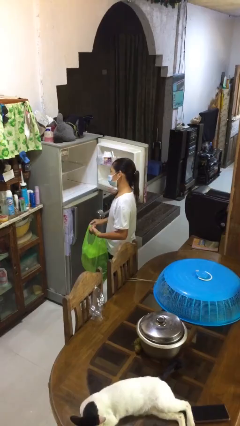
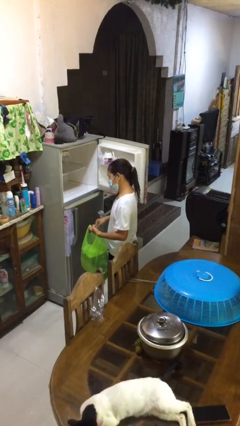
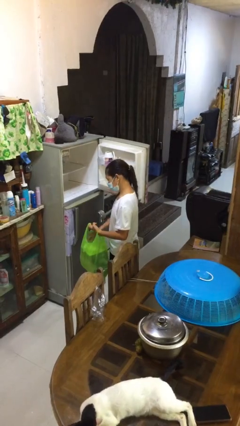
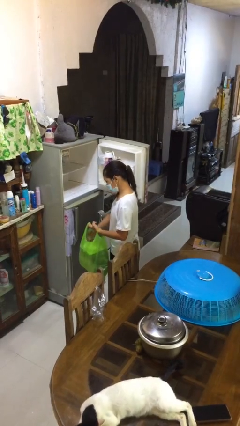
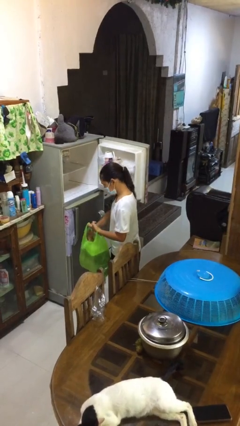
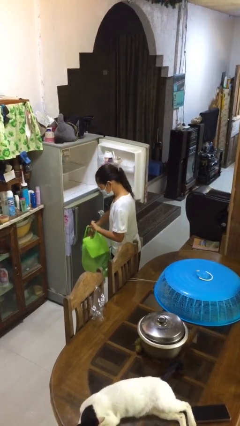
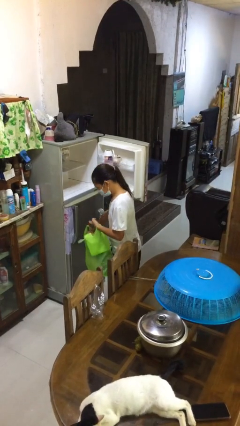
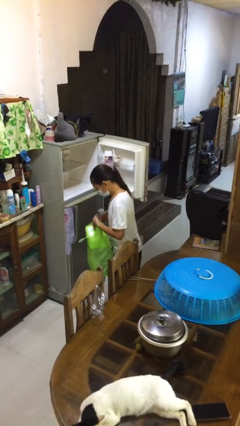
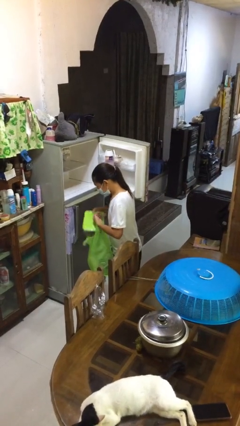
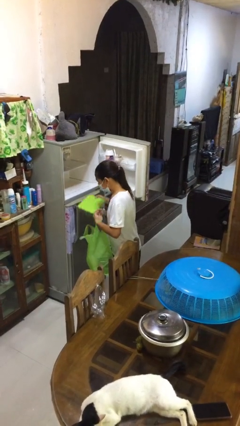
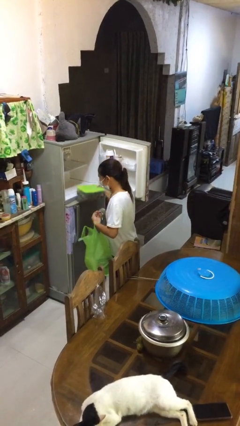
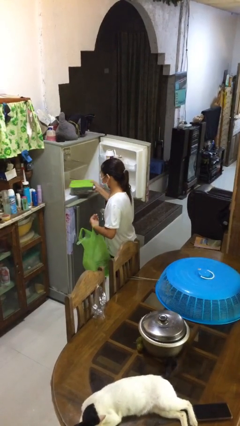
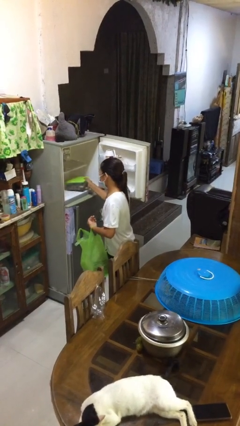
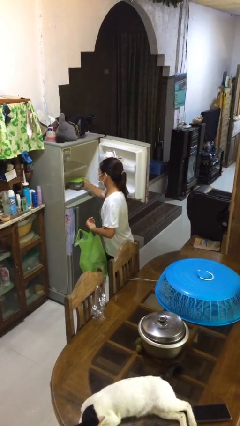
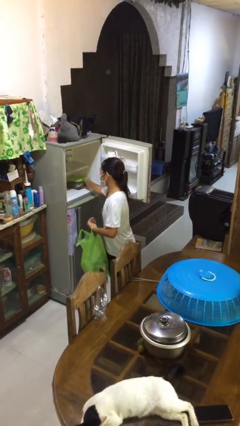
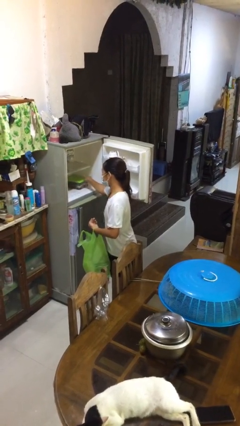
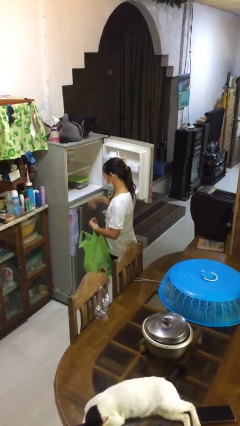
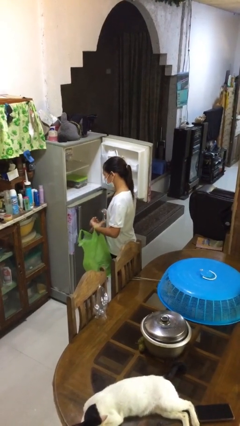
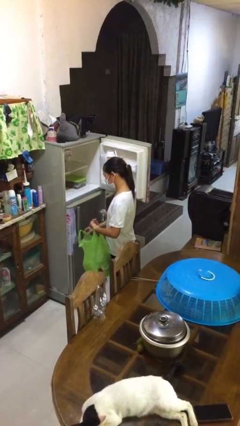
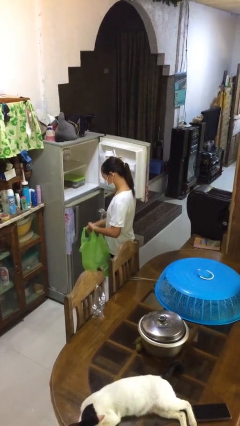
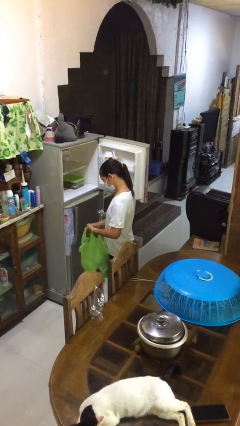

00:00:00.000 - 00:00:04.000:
person loads groceries into refrigerator

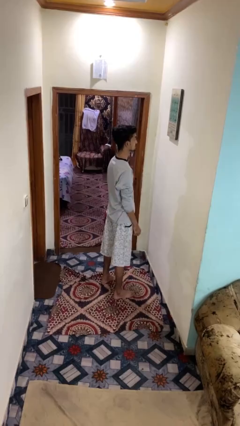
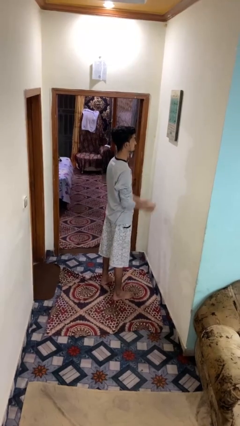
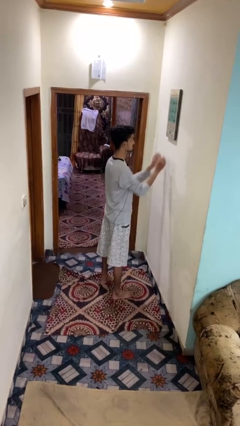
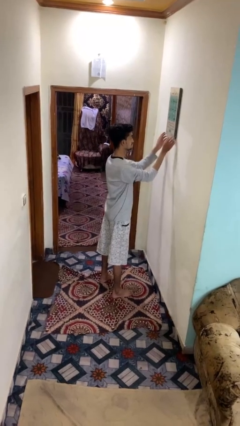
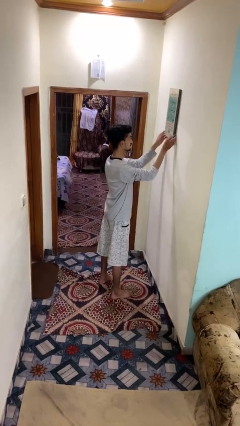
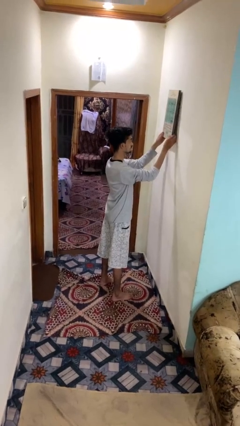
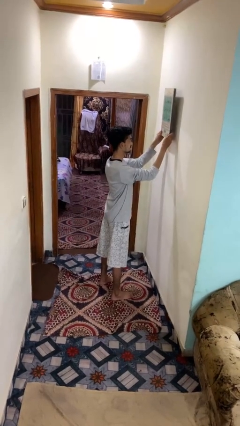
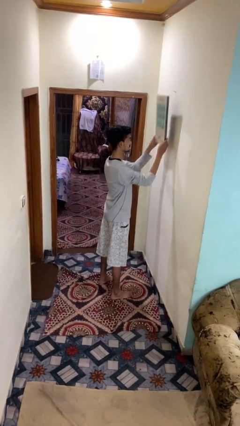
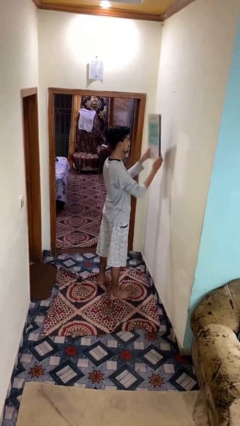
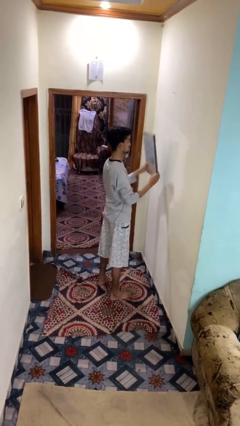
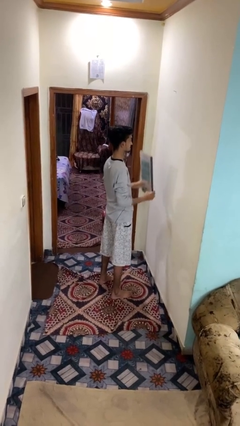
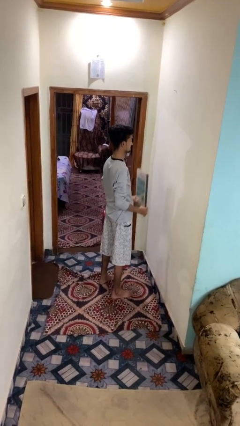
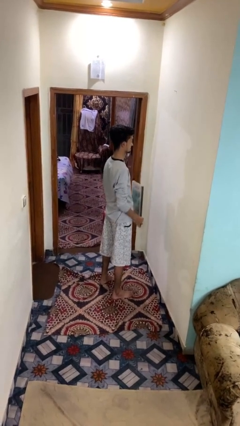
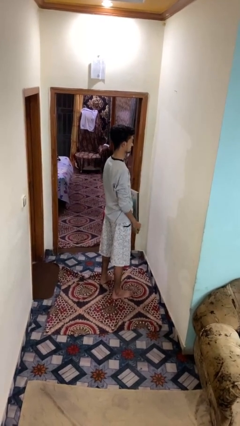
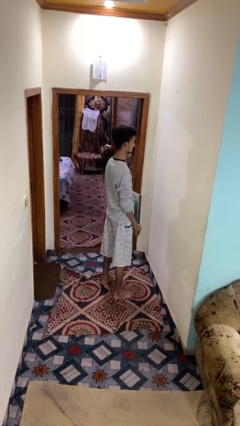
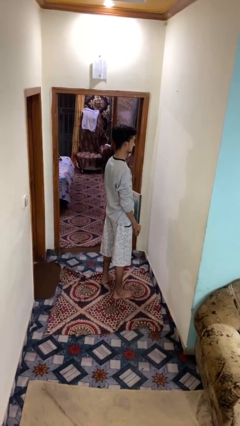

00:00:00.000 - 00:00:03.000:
person takes down picture frame

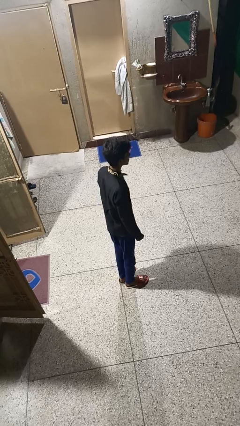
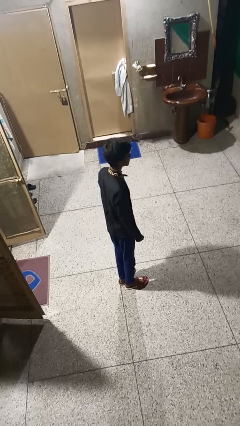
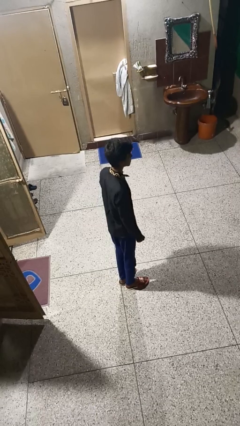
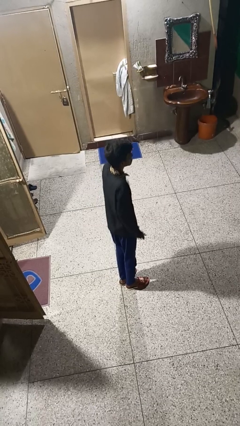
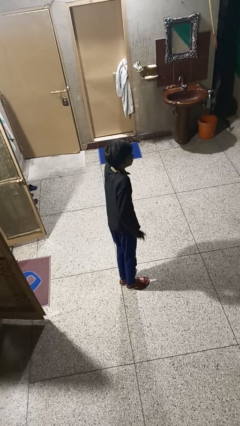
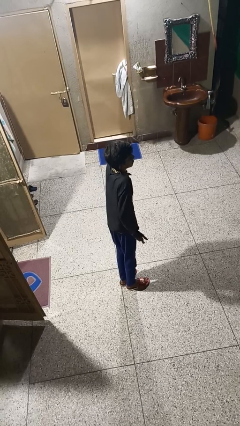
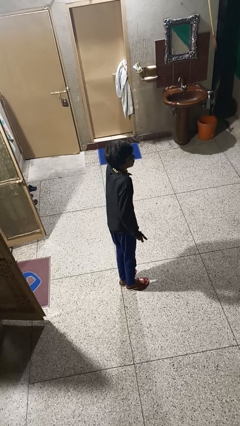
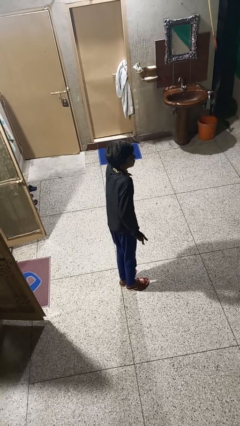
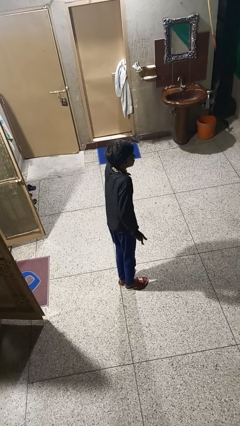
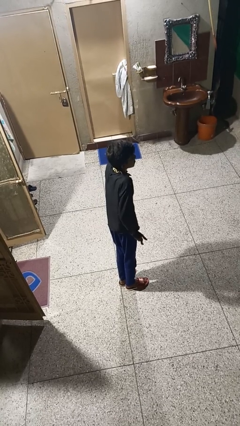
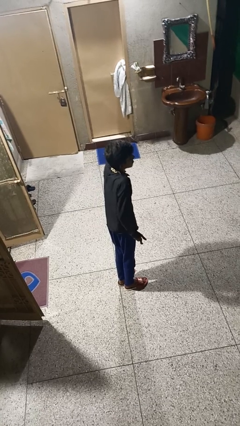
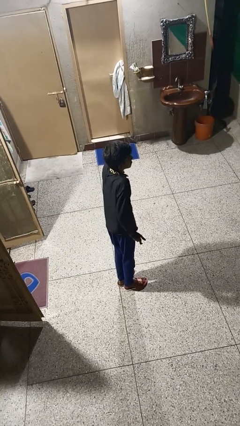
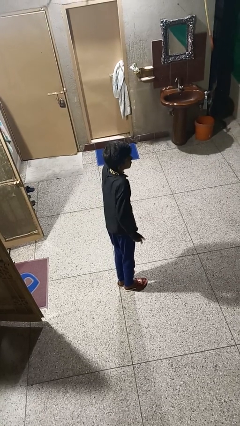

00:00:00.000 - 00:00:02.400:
person shrugs

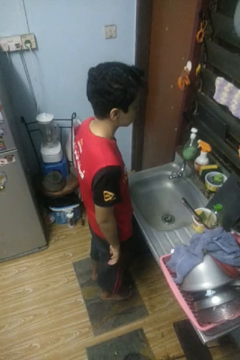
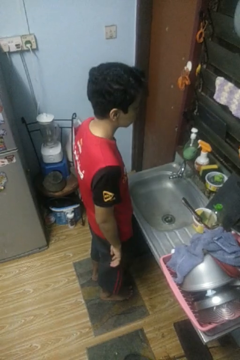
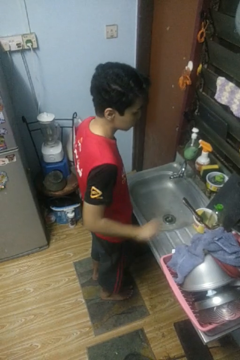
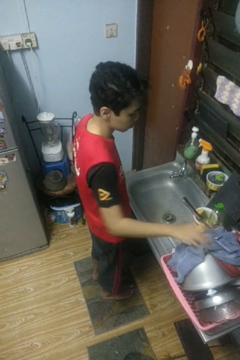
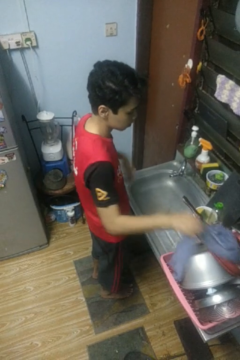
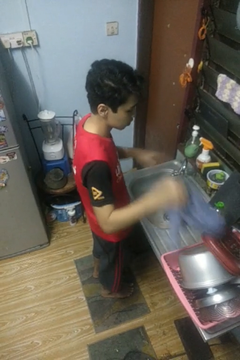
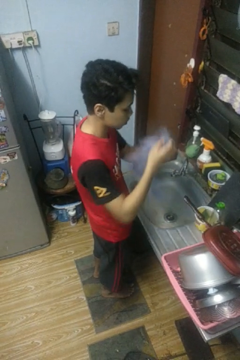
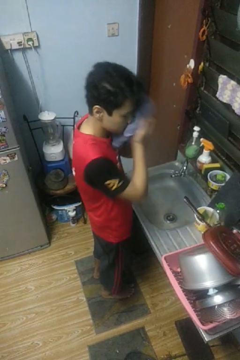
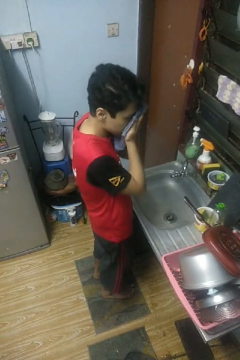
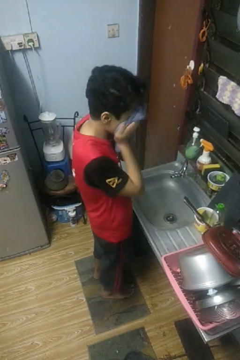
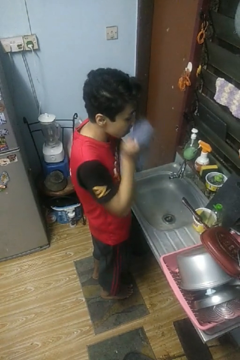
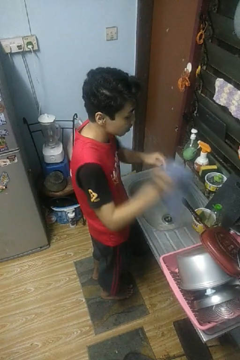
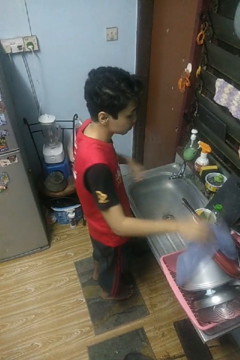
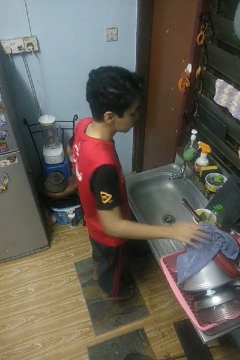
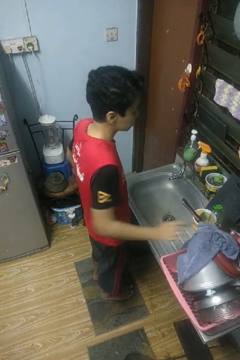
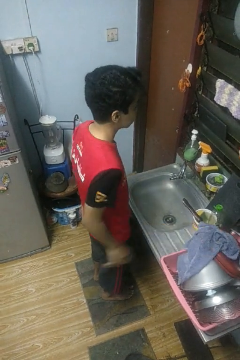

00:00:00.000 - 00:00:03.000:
person dries face with towel

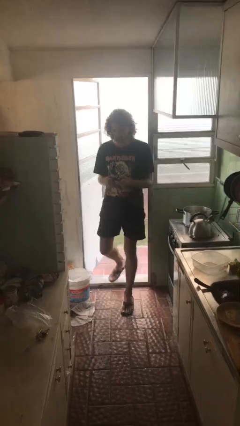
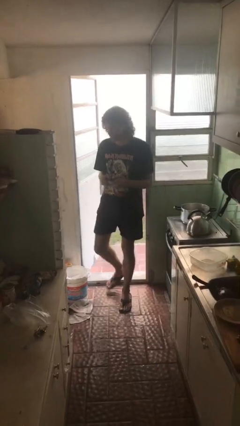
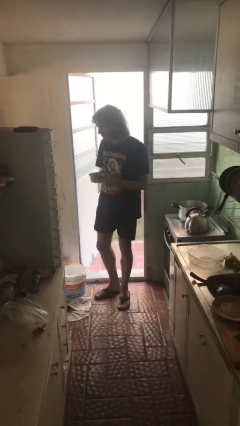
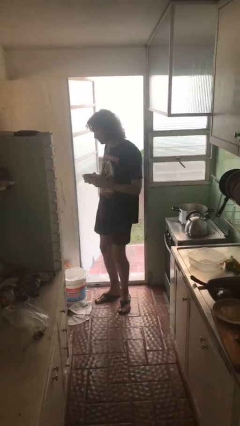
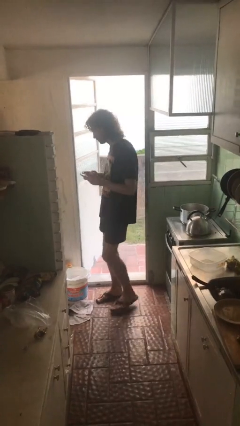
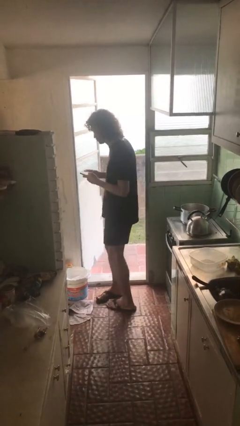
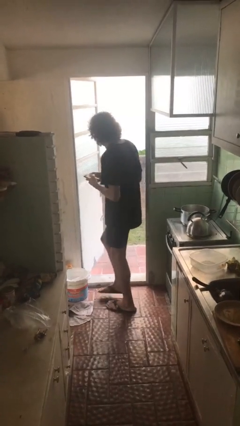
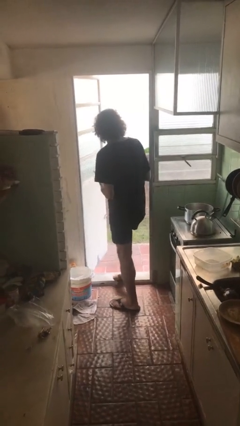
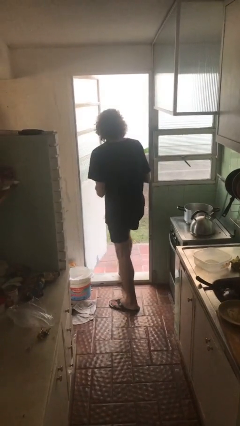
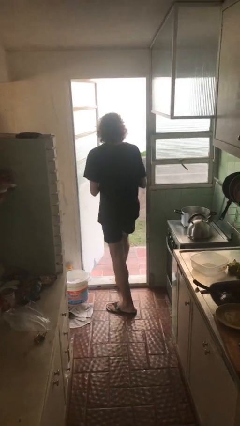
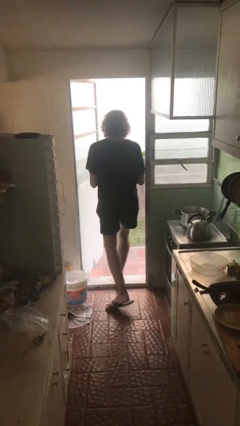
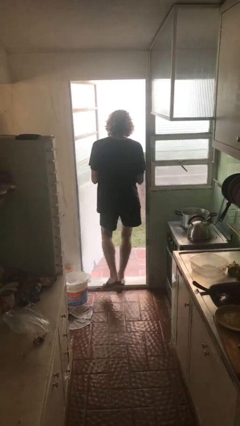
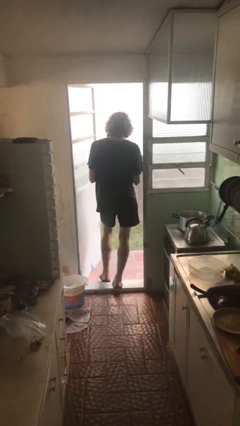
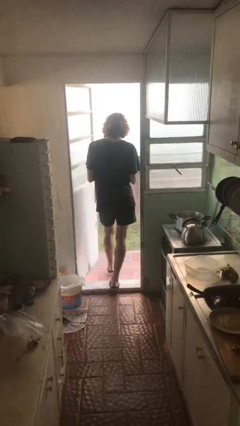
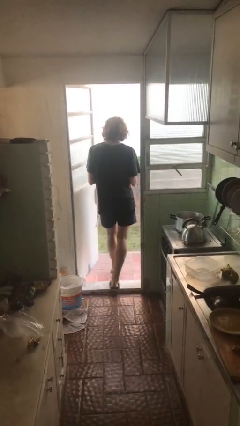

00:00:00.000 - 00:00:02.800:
person exits scene through structure

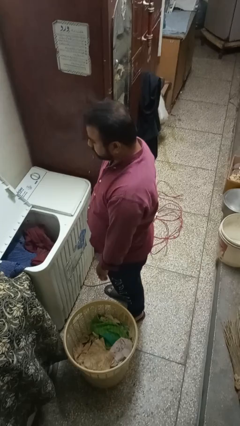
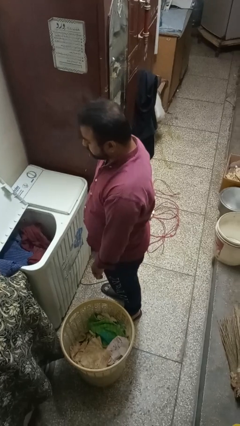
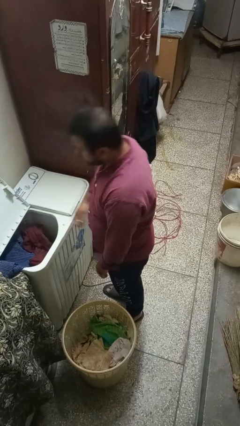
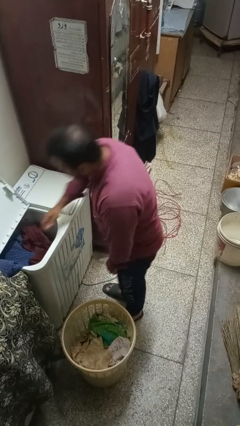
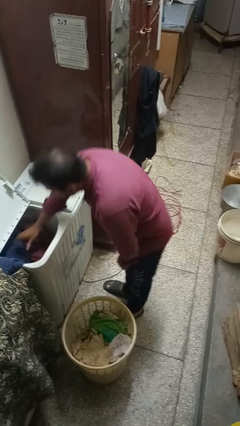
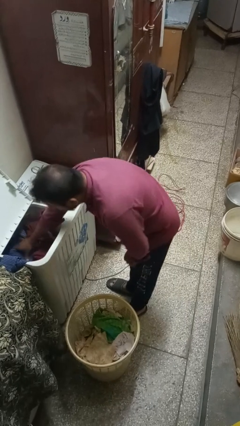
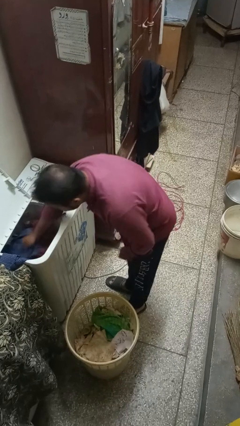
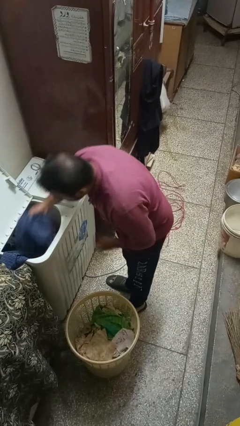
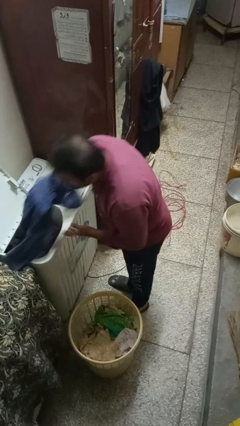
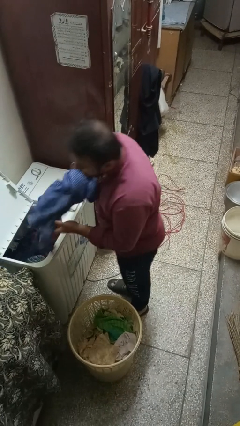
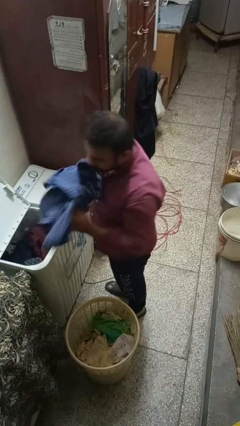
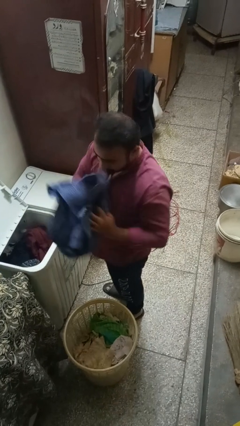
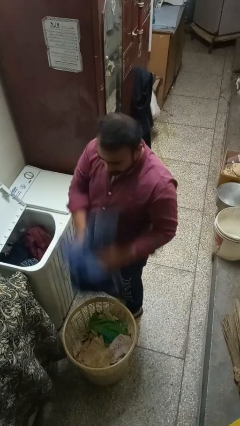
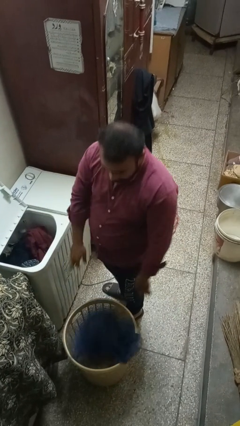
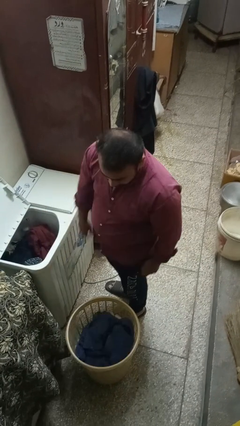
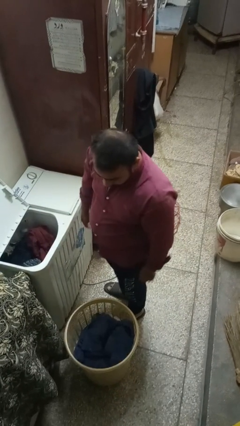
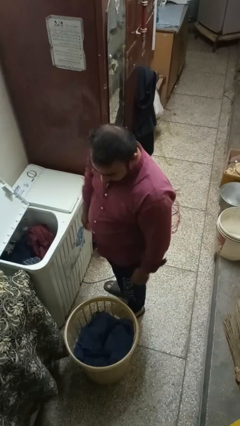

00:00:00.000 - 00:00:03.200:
person unloads clotheswasher
